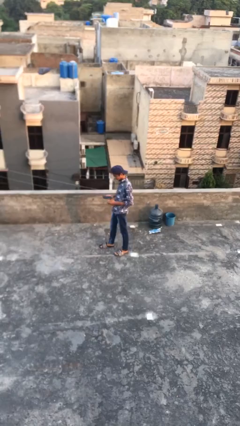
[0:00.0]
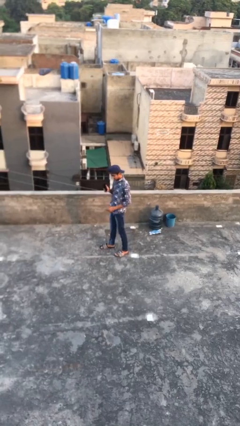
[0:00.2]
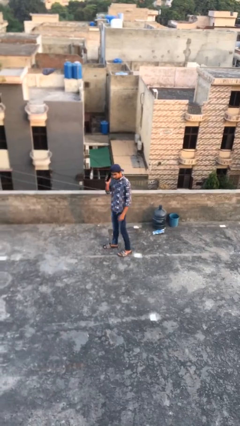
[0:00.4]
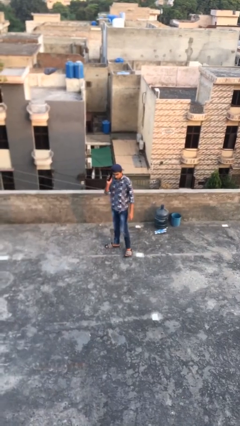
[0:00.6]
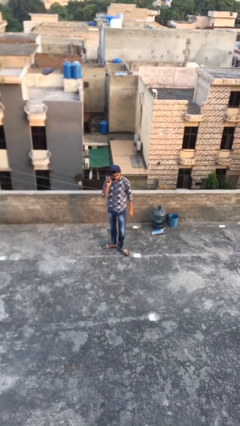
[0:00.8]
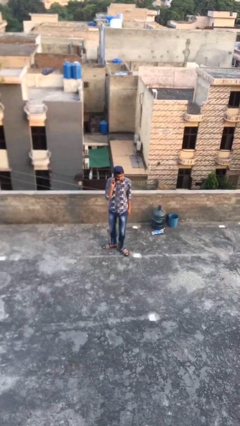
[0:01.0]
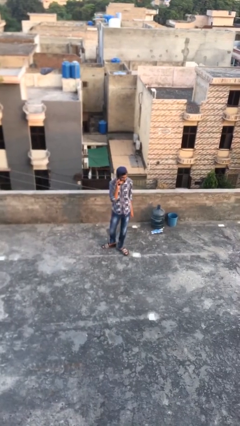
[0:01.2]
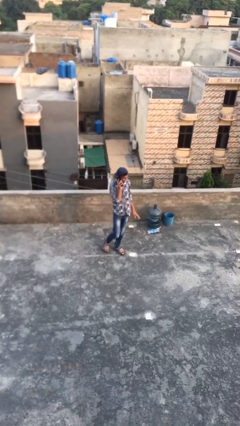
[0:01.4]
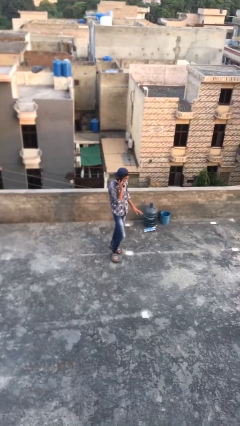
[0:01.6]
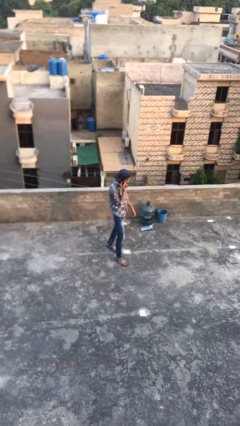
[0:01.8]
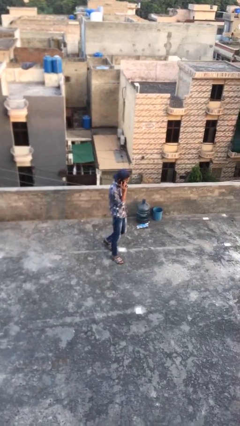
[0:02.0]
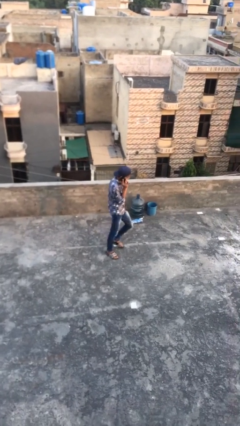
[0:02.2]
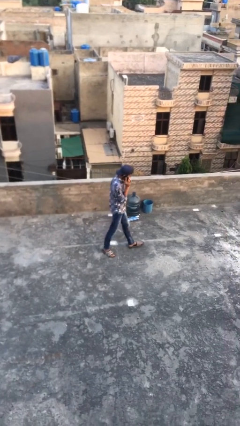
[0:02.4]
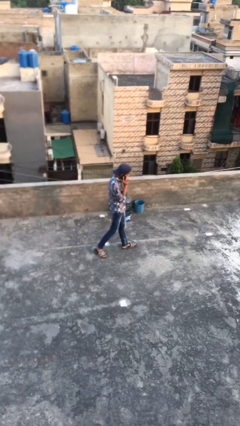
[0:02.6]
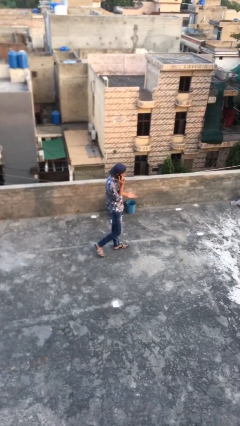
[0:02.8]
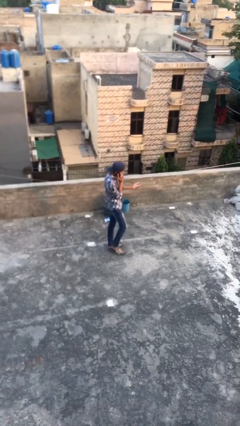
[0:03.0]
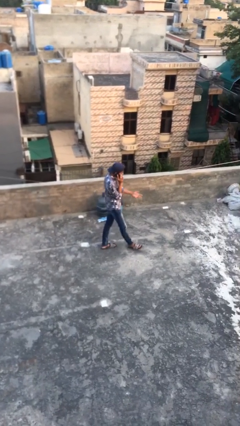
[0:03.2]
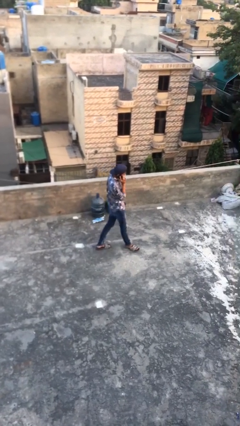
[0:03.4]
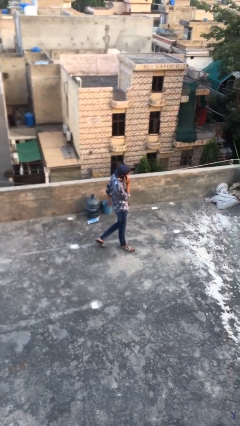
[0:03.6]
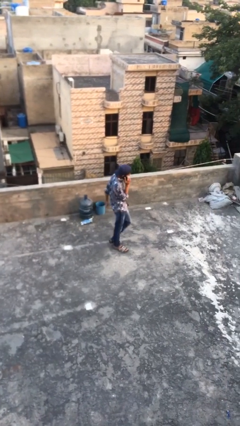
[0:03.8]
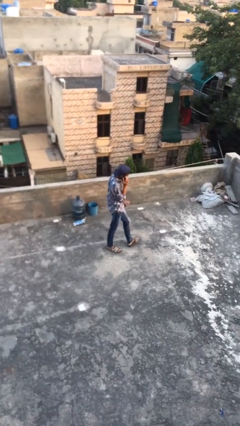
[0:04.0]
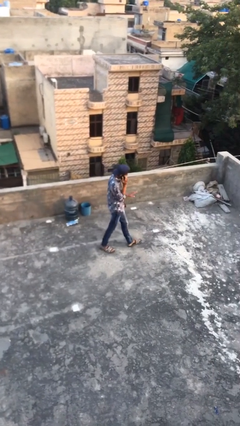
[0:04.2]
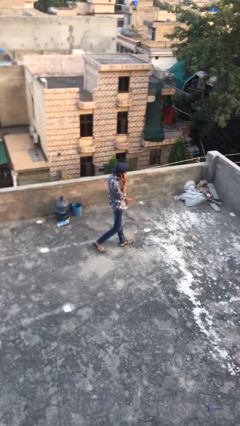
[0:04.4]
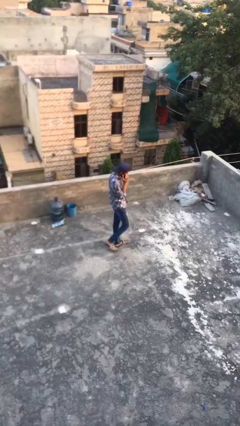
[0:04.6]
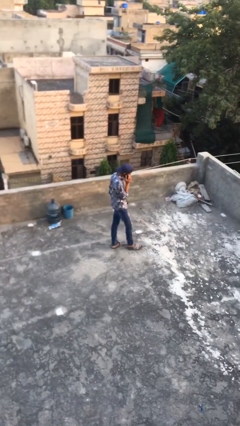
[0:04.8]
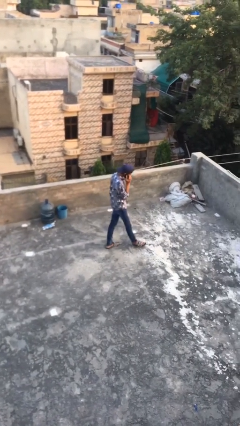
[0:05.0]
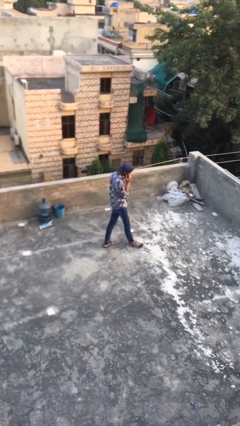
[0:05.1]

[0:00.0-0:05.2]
person talks on phone

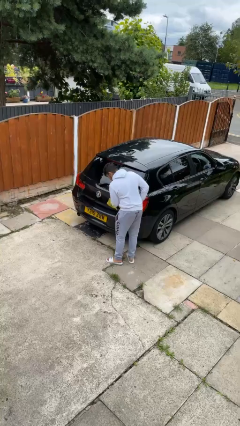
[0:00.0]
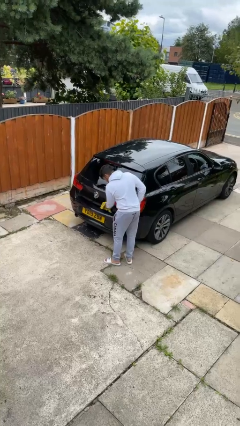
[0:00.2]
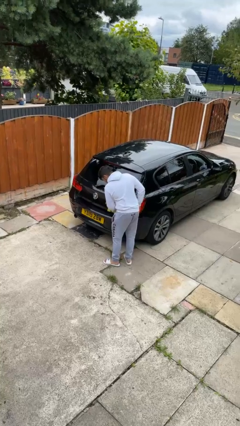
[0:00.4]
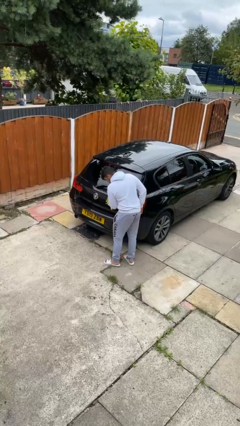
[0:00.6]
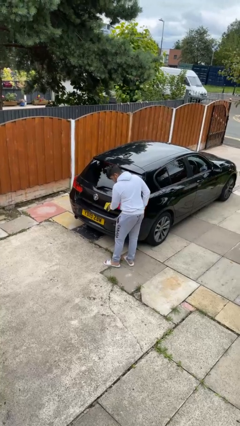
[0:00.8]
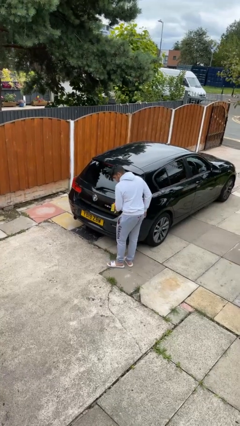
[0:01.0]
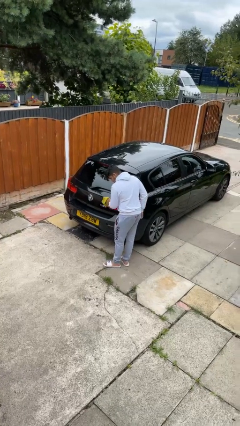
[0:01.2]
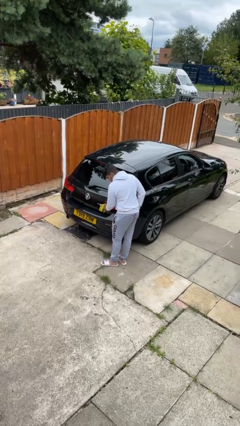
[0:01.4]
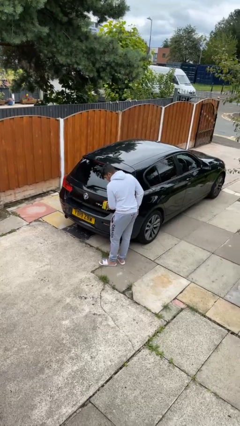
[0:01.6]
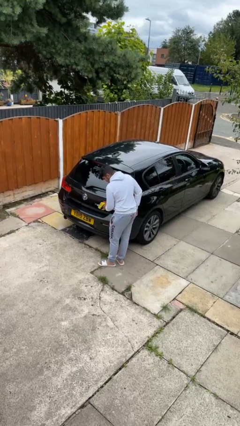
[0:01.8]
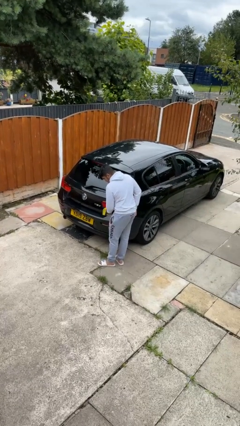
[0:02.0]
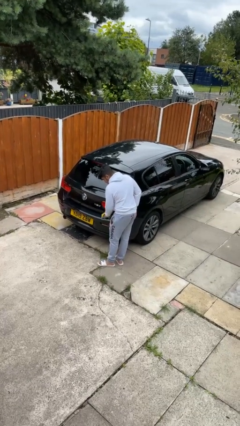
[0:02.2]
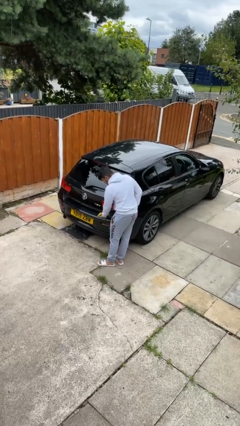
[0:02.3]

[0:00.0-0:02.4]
person polishes car with rag

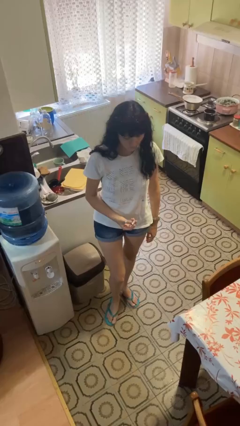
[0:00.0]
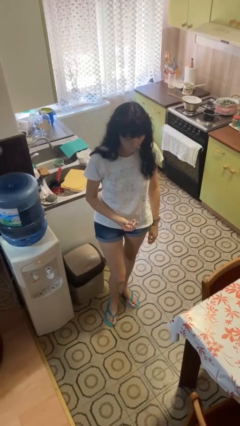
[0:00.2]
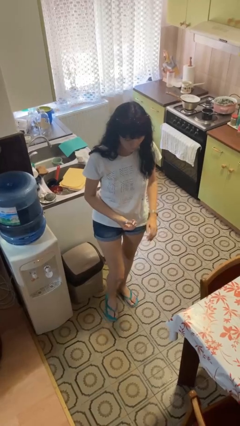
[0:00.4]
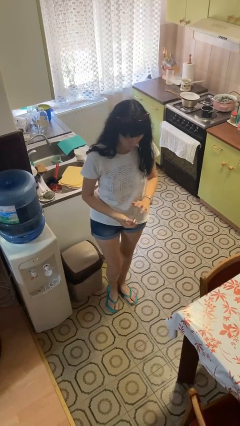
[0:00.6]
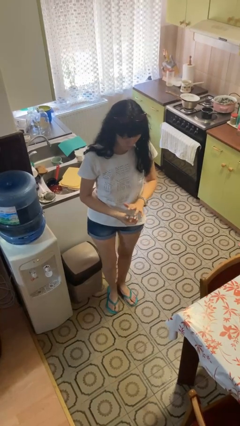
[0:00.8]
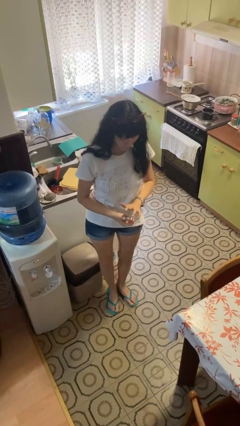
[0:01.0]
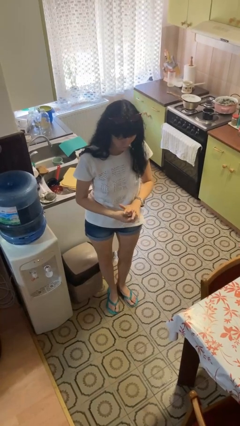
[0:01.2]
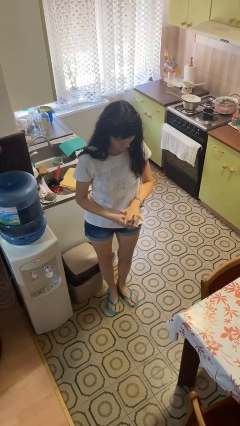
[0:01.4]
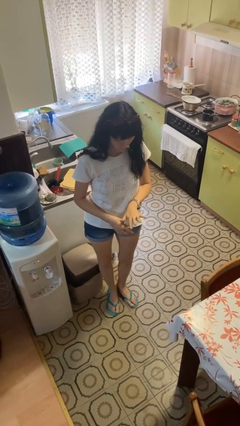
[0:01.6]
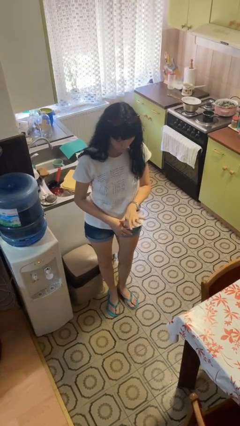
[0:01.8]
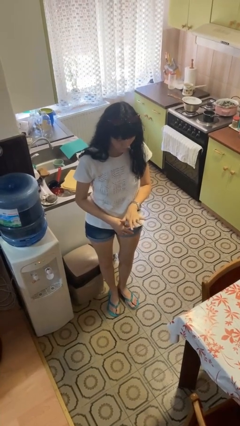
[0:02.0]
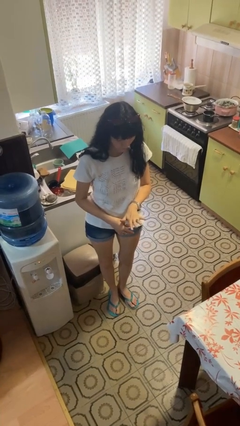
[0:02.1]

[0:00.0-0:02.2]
person puts on ring

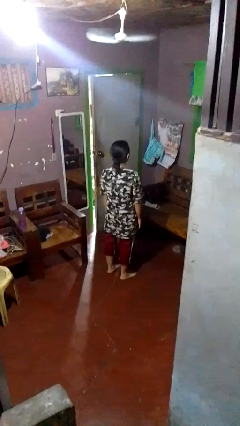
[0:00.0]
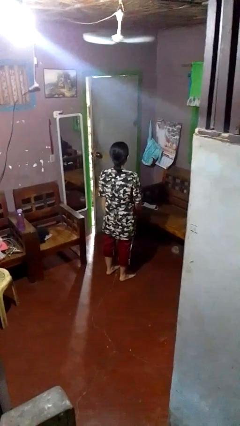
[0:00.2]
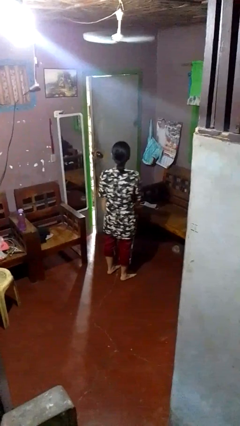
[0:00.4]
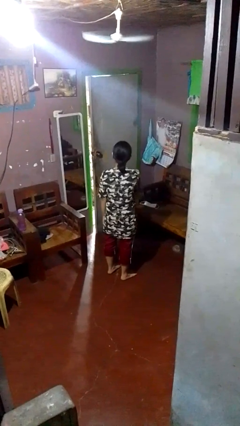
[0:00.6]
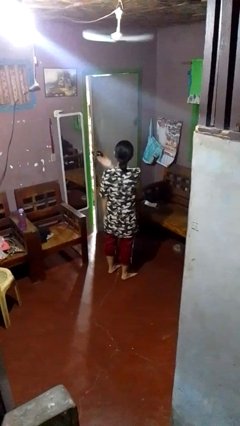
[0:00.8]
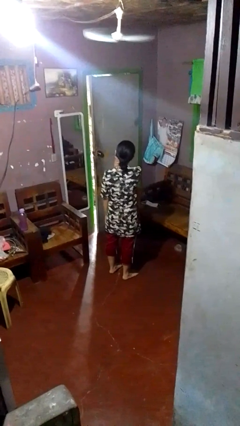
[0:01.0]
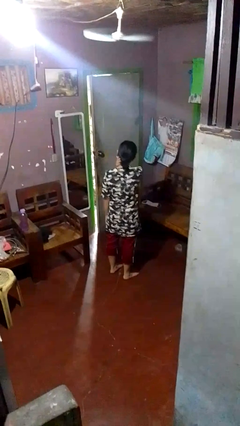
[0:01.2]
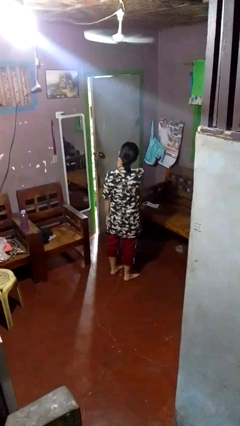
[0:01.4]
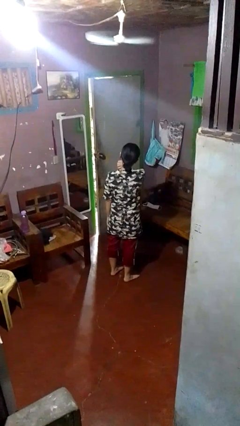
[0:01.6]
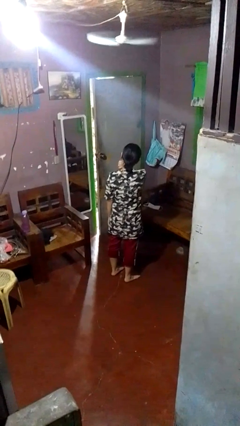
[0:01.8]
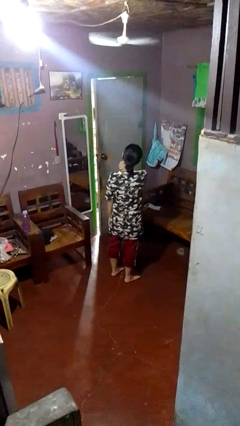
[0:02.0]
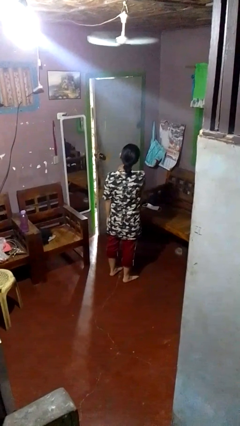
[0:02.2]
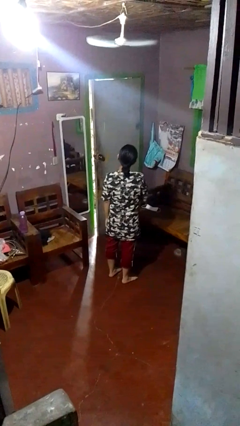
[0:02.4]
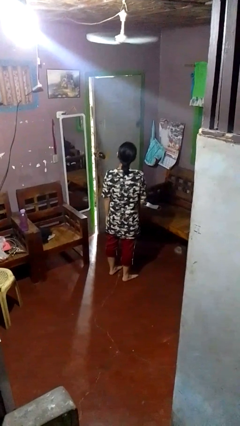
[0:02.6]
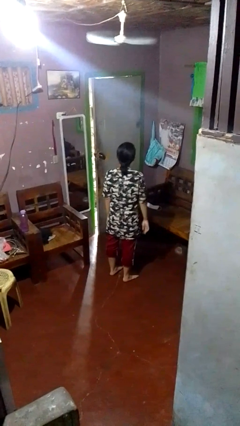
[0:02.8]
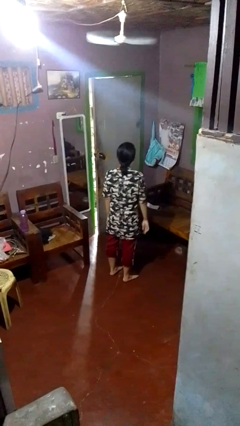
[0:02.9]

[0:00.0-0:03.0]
person swats bug

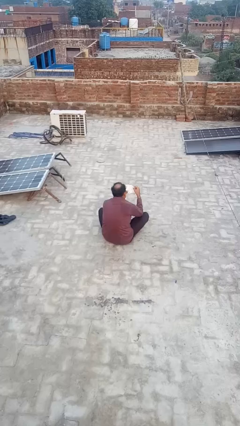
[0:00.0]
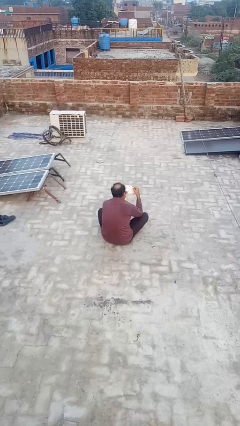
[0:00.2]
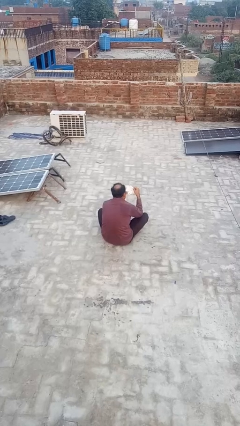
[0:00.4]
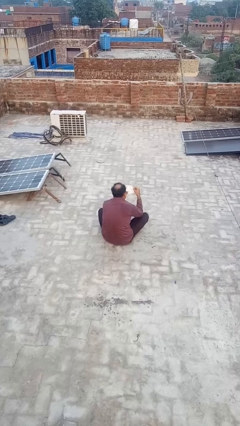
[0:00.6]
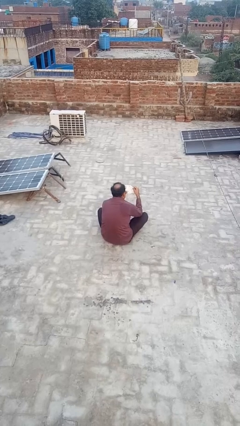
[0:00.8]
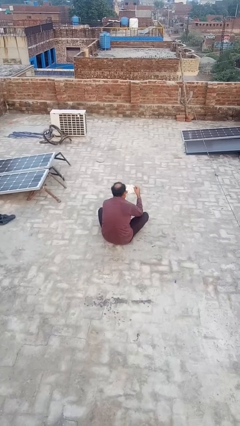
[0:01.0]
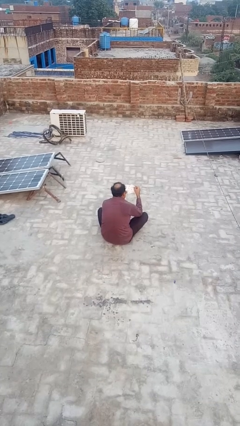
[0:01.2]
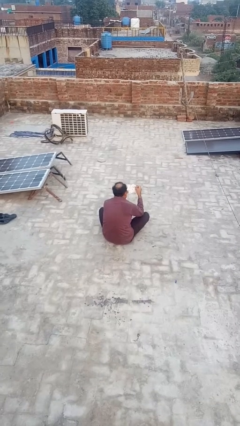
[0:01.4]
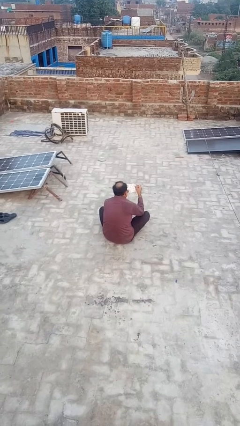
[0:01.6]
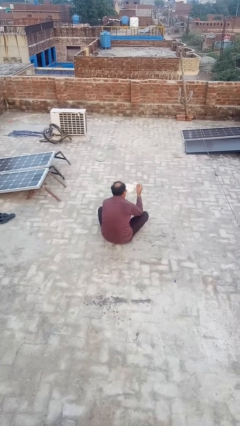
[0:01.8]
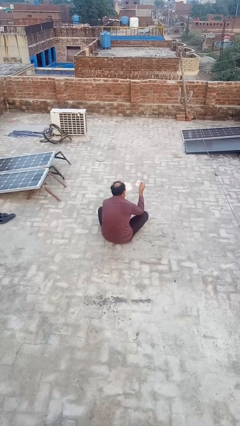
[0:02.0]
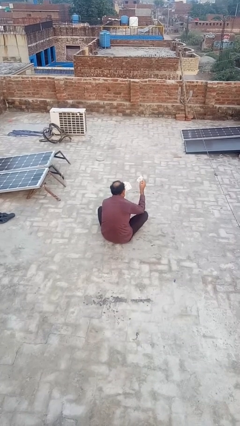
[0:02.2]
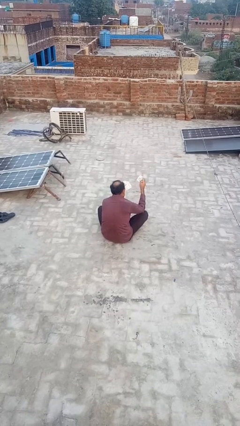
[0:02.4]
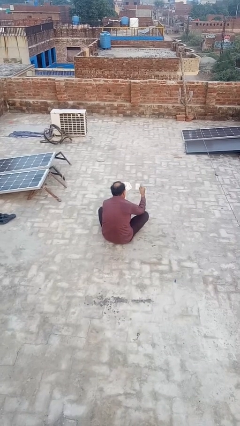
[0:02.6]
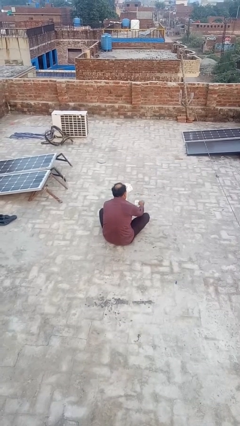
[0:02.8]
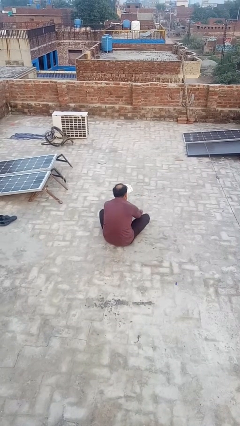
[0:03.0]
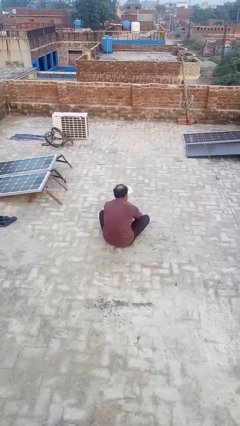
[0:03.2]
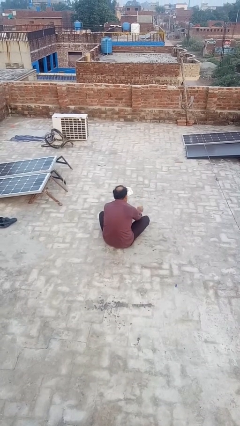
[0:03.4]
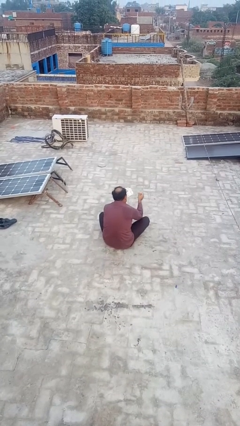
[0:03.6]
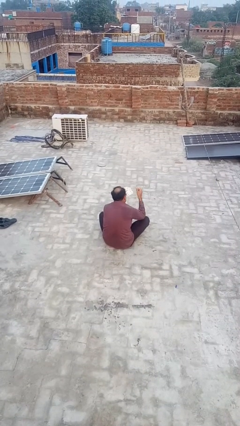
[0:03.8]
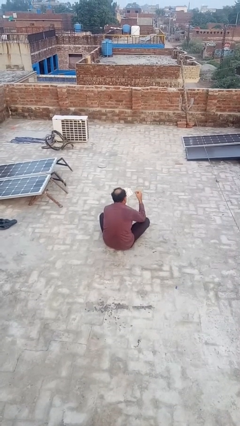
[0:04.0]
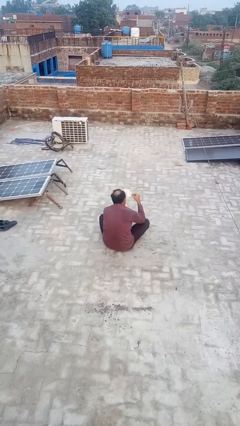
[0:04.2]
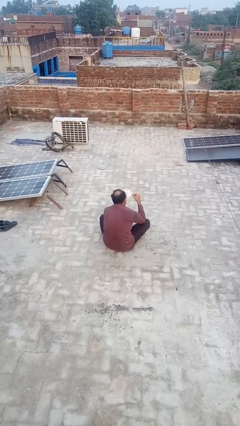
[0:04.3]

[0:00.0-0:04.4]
person discards trash
